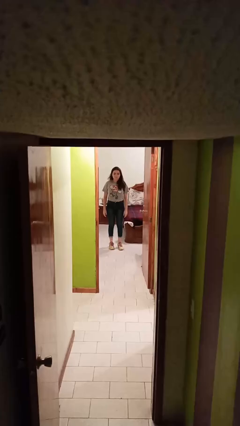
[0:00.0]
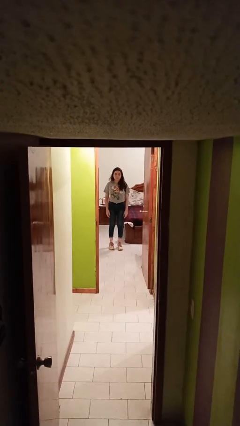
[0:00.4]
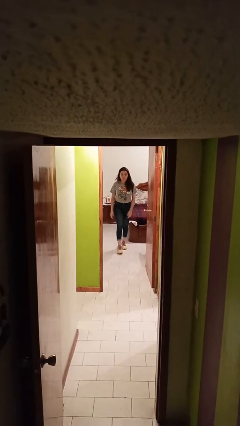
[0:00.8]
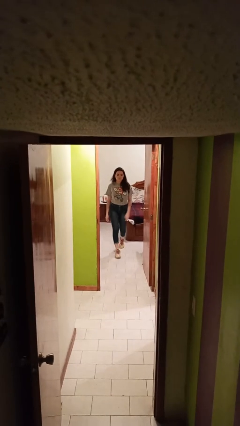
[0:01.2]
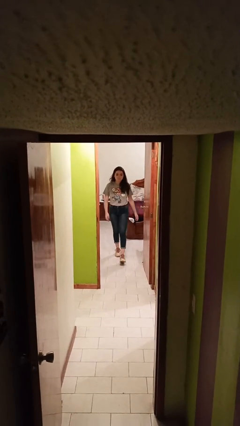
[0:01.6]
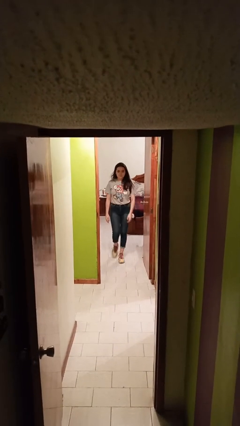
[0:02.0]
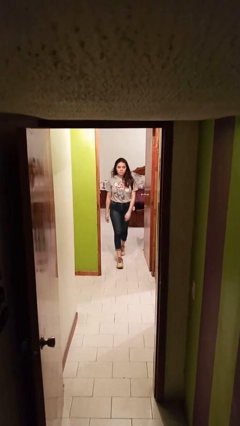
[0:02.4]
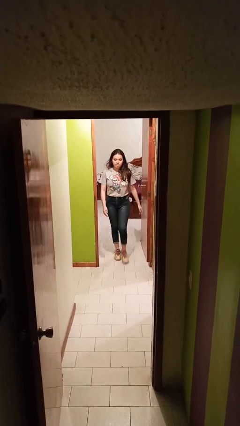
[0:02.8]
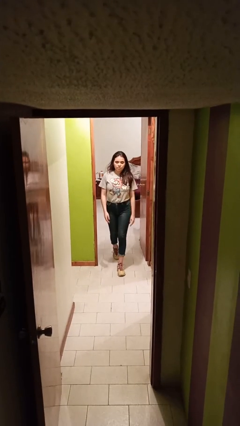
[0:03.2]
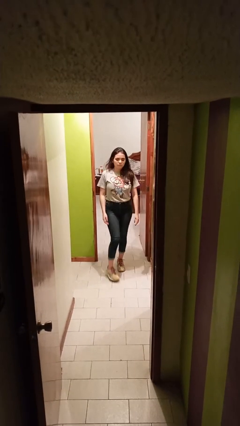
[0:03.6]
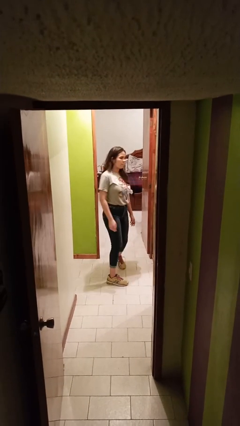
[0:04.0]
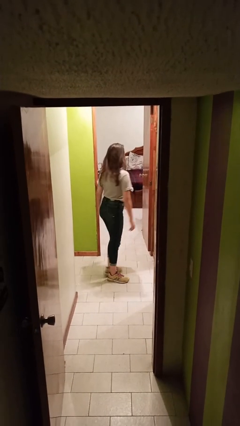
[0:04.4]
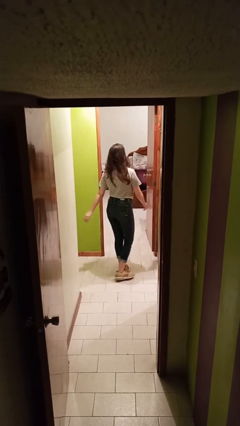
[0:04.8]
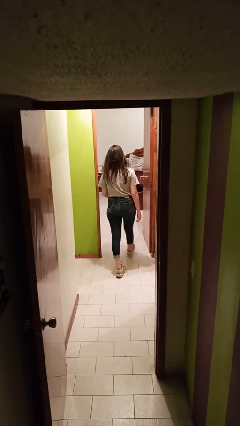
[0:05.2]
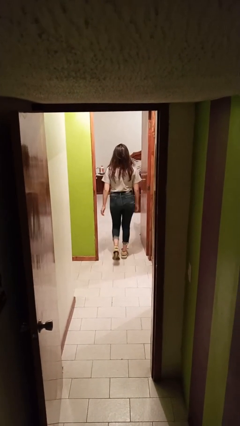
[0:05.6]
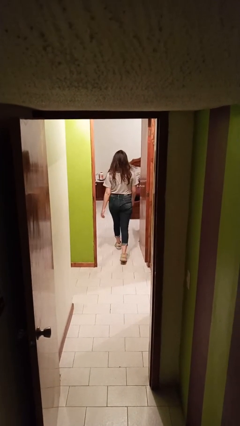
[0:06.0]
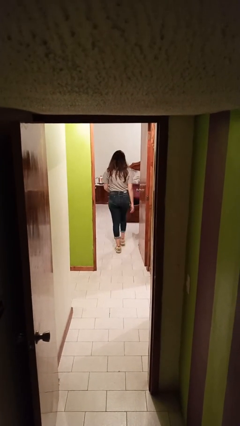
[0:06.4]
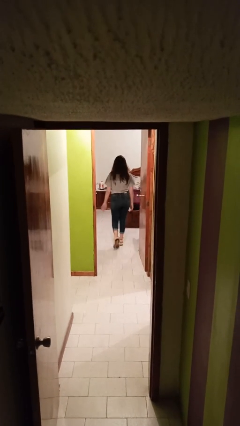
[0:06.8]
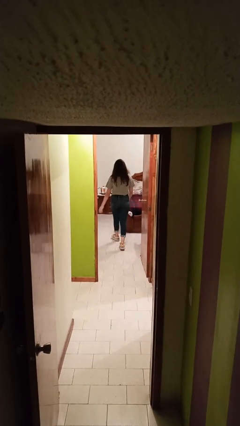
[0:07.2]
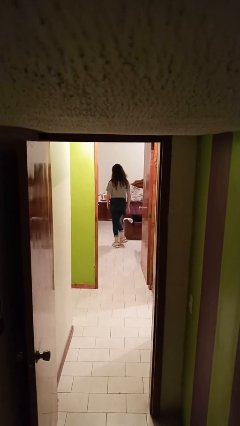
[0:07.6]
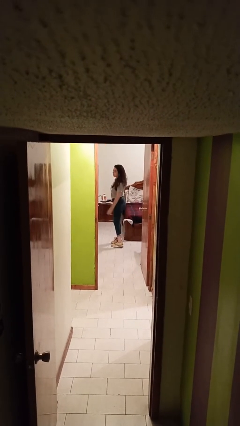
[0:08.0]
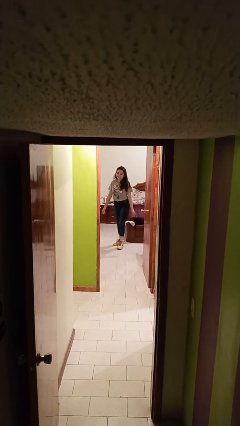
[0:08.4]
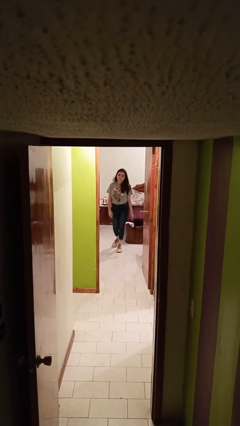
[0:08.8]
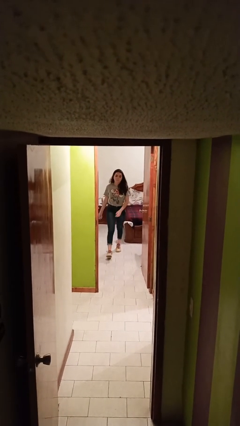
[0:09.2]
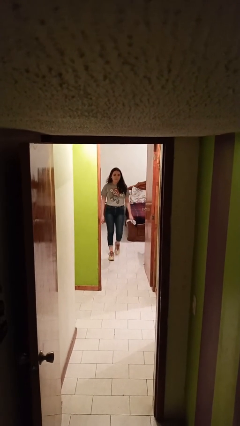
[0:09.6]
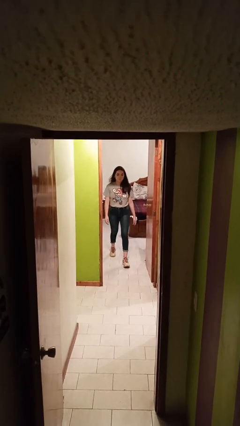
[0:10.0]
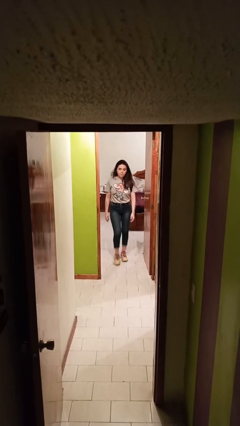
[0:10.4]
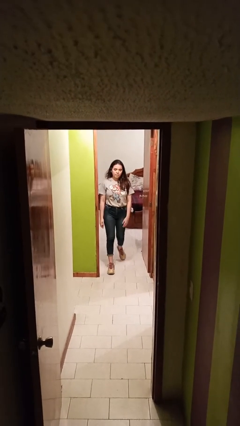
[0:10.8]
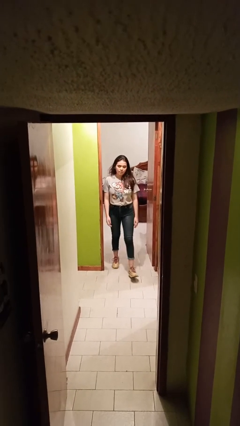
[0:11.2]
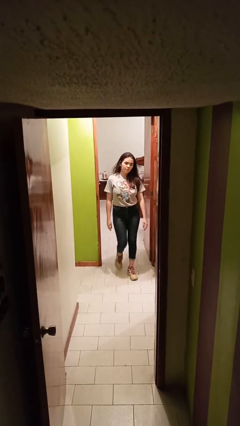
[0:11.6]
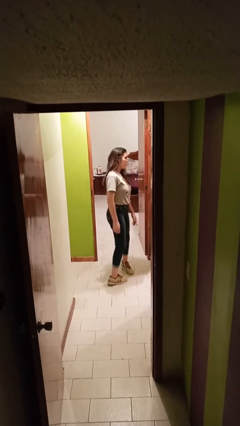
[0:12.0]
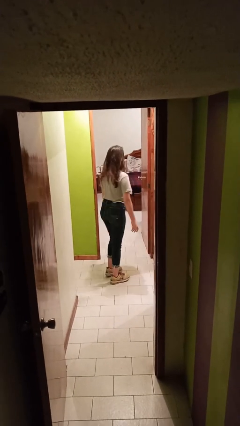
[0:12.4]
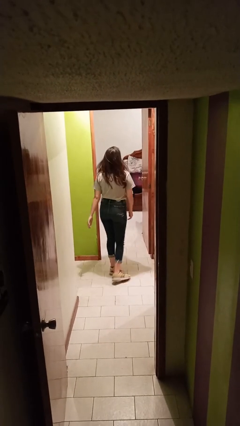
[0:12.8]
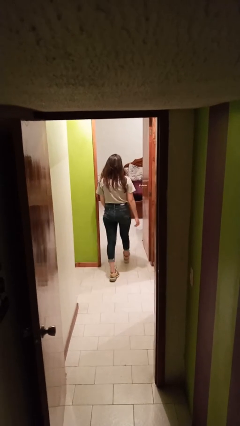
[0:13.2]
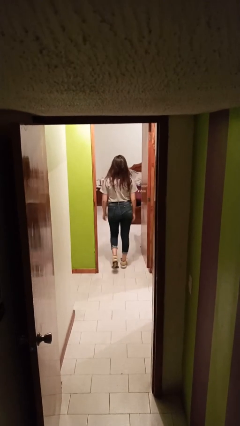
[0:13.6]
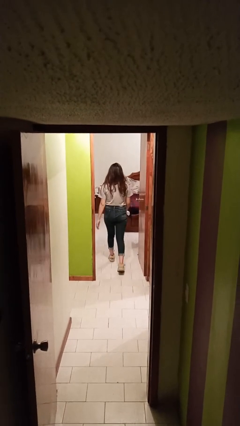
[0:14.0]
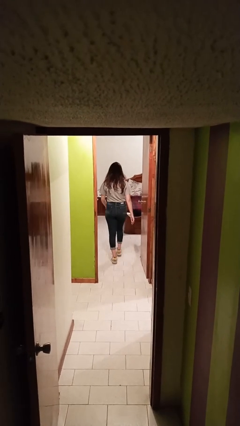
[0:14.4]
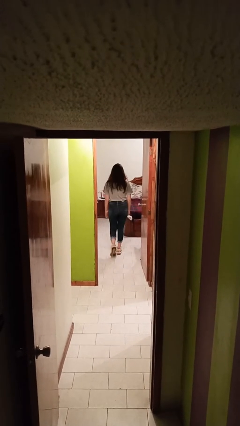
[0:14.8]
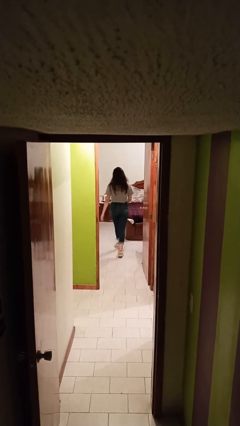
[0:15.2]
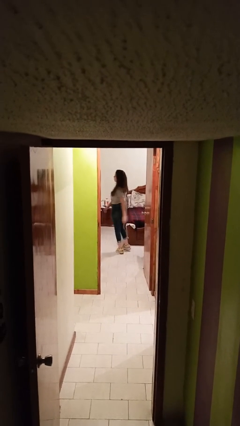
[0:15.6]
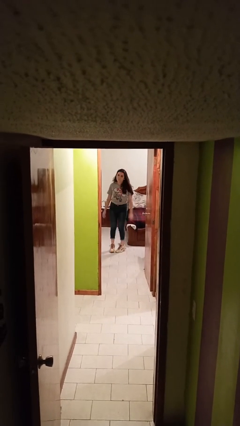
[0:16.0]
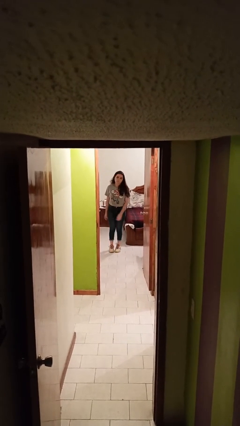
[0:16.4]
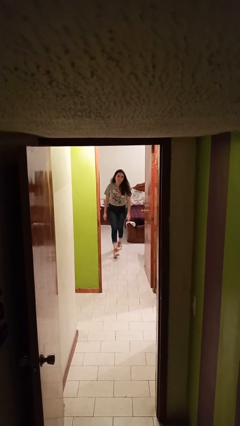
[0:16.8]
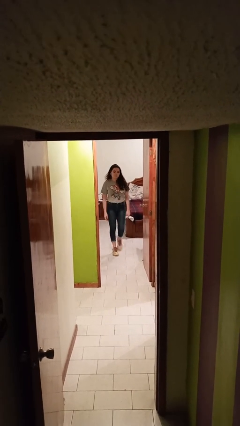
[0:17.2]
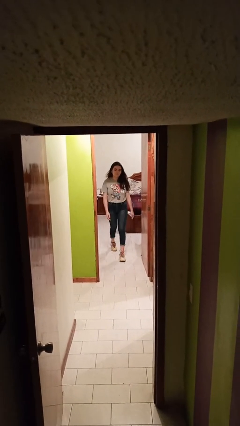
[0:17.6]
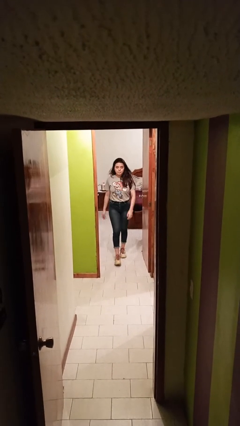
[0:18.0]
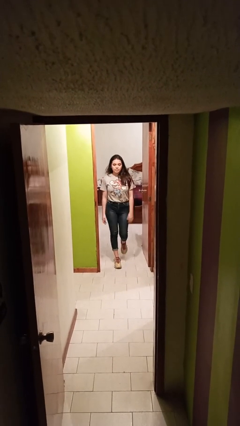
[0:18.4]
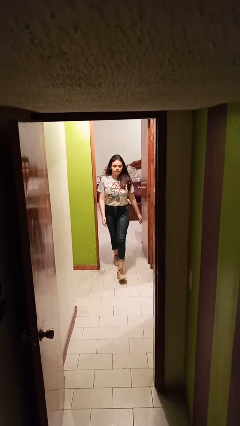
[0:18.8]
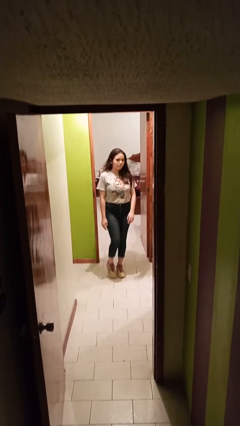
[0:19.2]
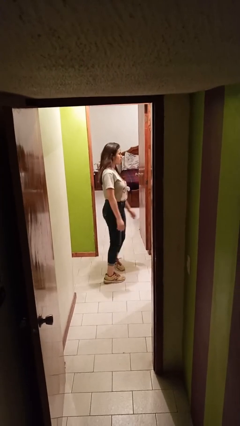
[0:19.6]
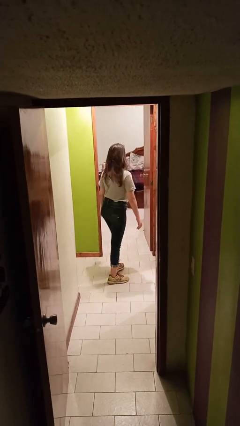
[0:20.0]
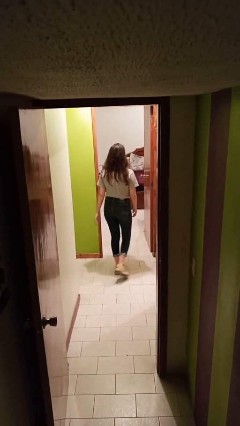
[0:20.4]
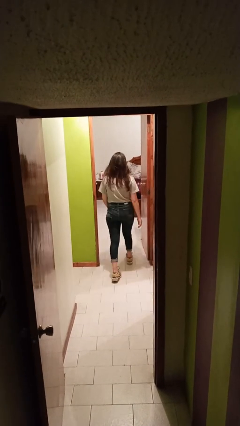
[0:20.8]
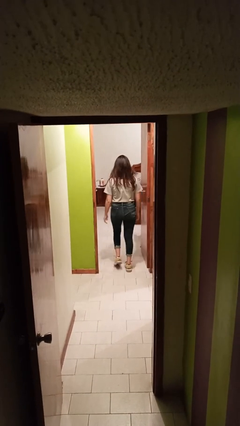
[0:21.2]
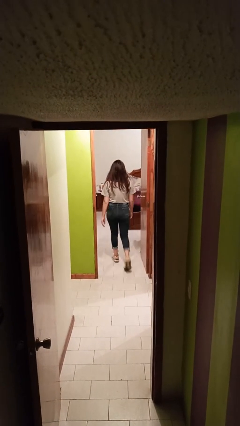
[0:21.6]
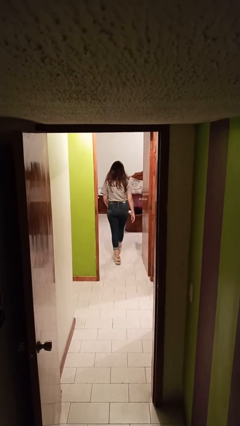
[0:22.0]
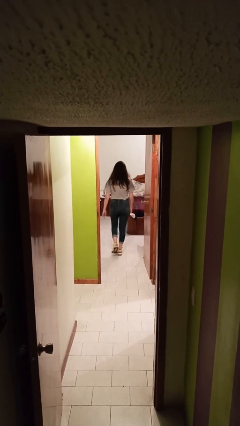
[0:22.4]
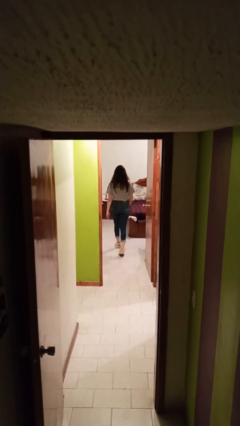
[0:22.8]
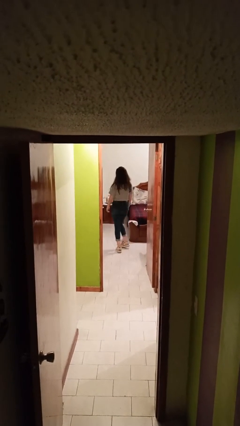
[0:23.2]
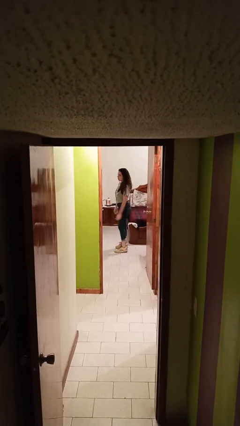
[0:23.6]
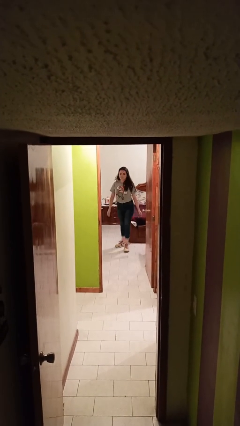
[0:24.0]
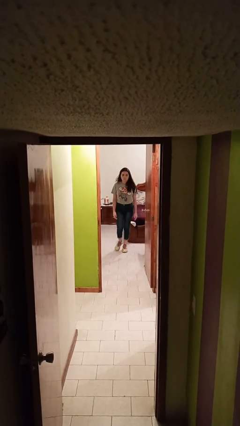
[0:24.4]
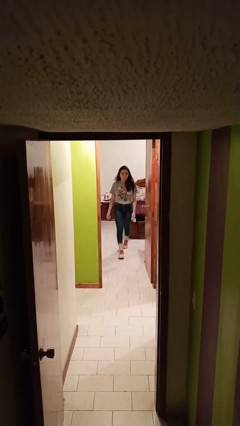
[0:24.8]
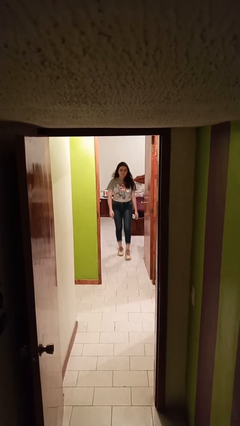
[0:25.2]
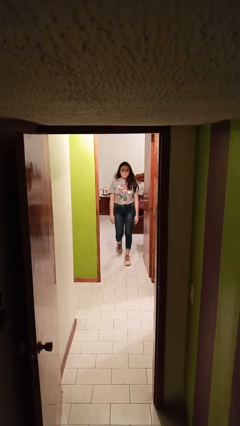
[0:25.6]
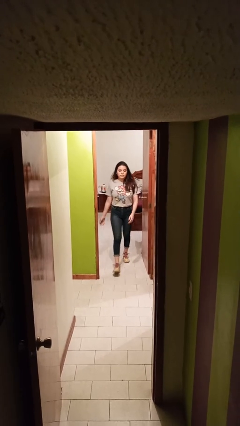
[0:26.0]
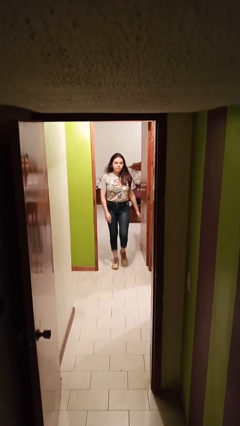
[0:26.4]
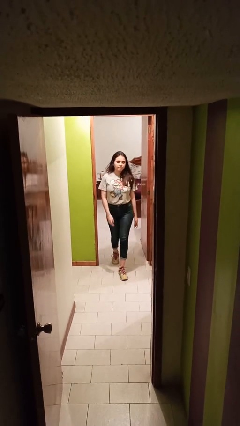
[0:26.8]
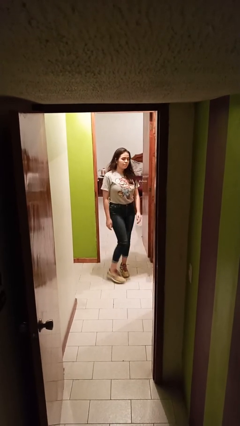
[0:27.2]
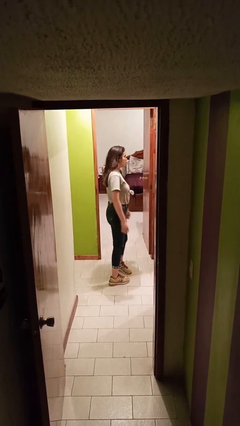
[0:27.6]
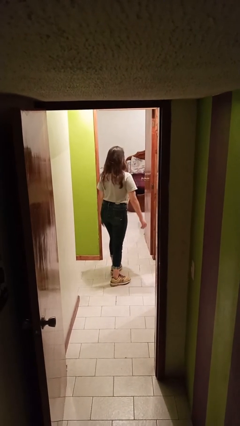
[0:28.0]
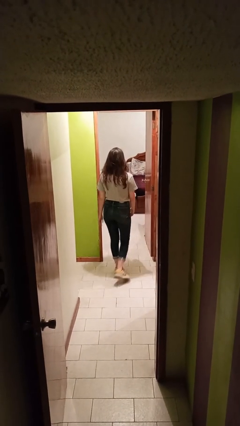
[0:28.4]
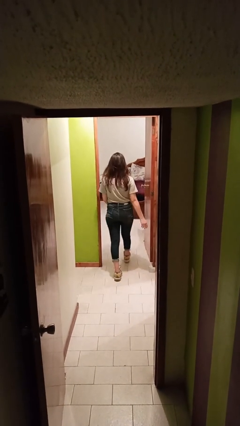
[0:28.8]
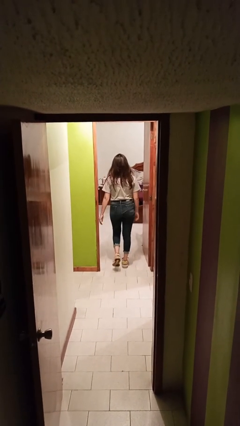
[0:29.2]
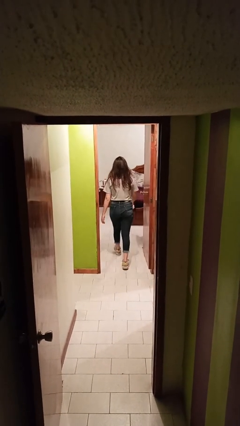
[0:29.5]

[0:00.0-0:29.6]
person walks

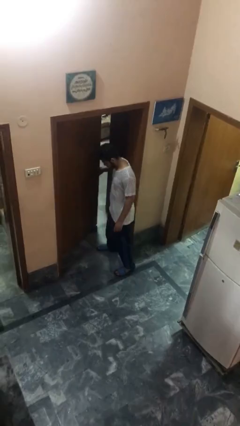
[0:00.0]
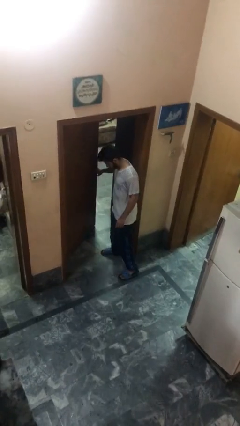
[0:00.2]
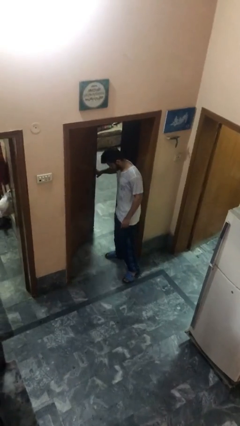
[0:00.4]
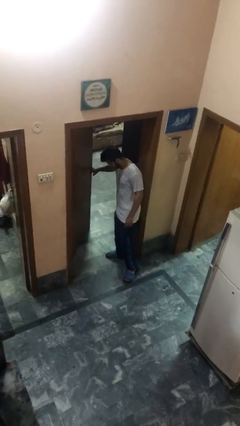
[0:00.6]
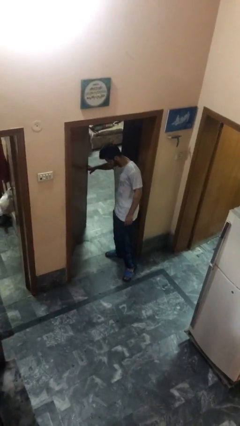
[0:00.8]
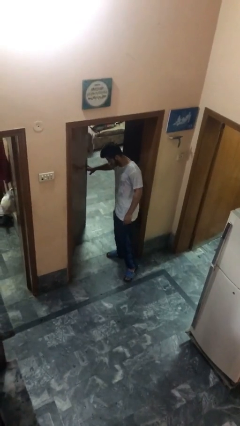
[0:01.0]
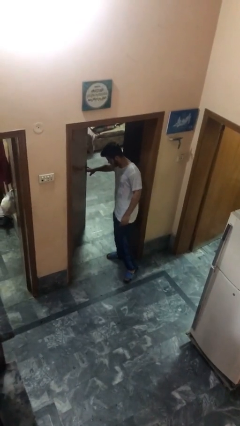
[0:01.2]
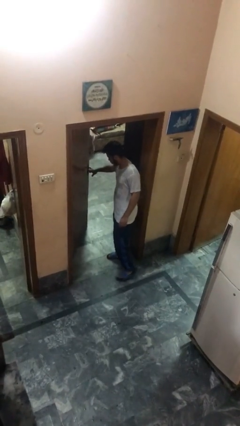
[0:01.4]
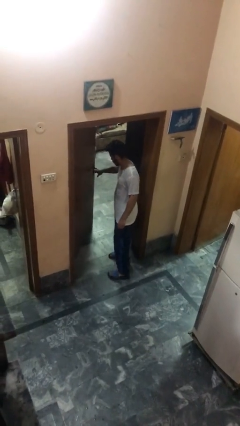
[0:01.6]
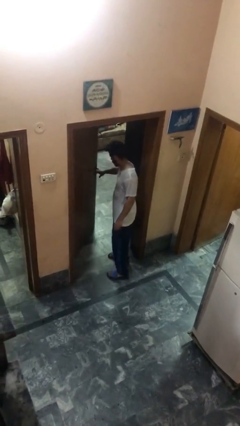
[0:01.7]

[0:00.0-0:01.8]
person opens facility door

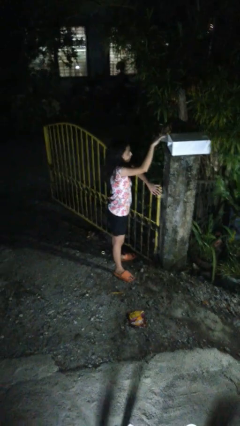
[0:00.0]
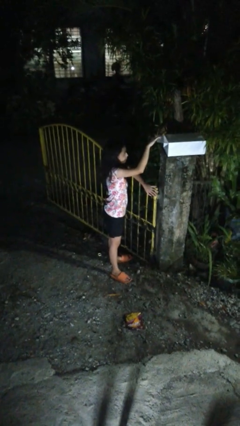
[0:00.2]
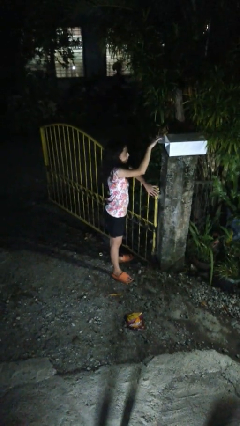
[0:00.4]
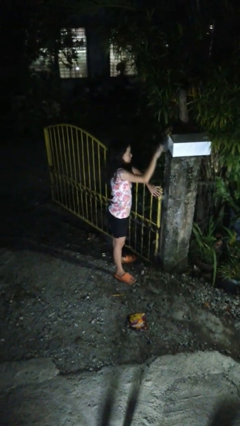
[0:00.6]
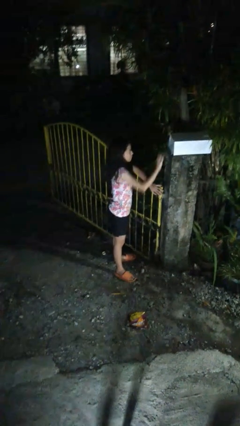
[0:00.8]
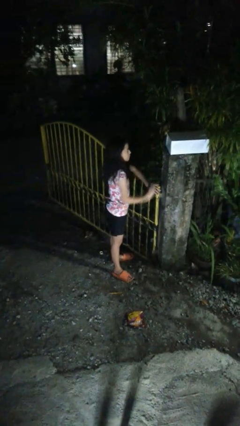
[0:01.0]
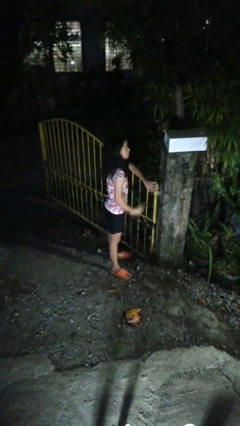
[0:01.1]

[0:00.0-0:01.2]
person closes mailbox

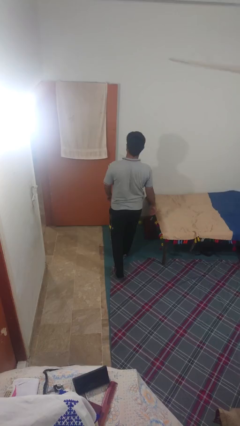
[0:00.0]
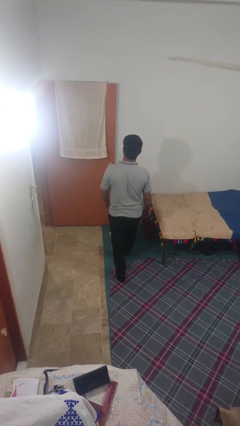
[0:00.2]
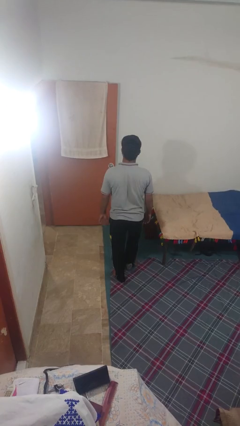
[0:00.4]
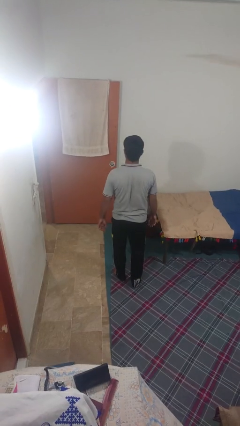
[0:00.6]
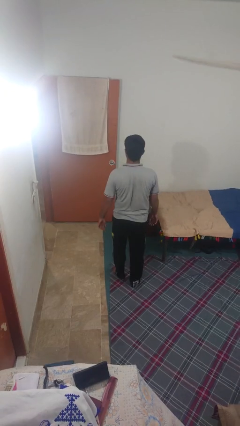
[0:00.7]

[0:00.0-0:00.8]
person walks tiptoe
